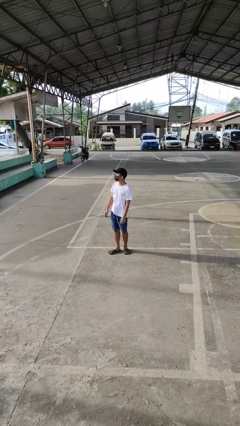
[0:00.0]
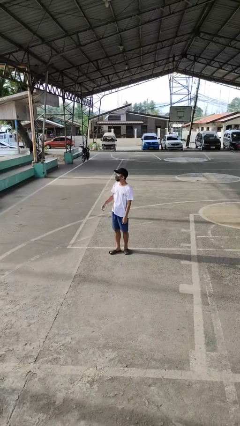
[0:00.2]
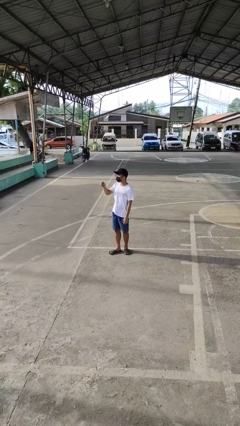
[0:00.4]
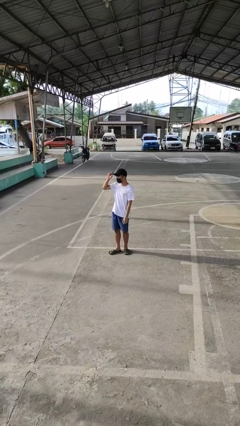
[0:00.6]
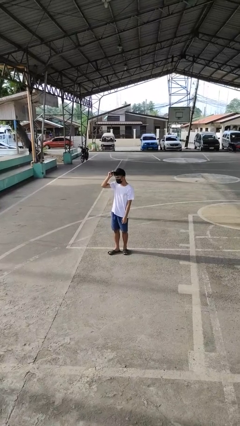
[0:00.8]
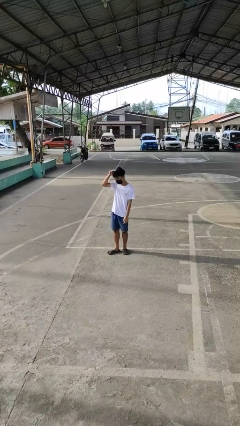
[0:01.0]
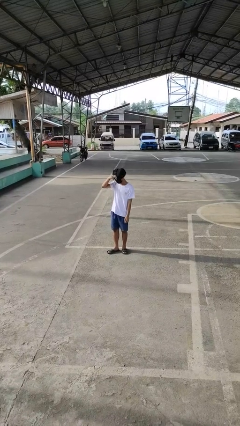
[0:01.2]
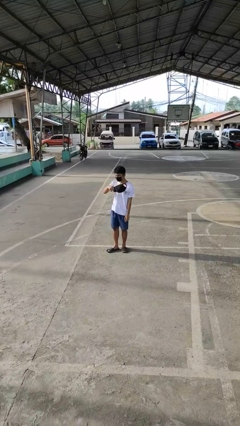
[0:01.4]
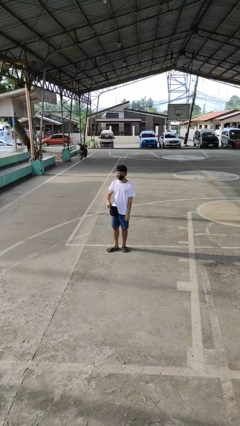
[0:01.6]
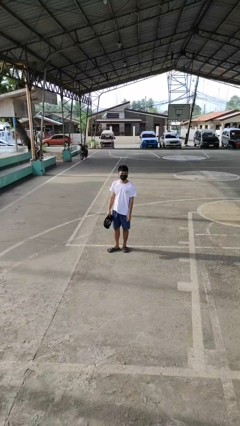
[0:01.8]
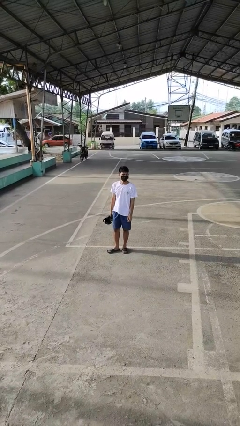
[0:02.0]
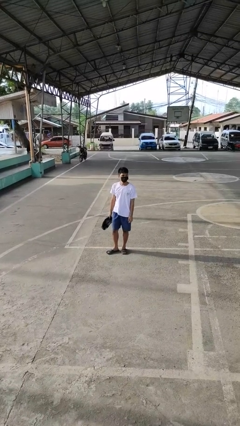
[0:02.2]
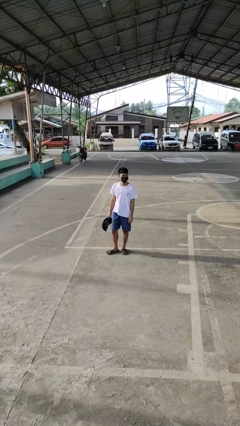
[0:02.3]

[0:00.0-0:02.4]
person takes off hat

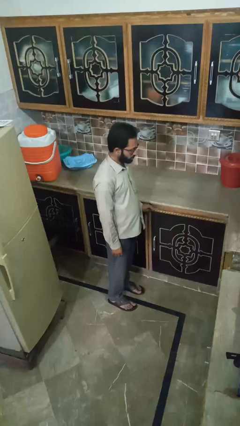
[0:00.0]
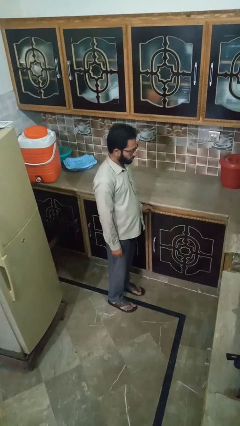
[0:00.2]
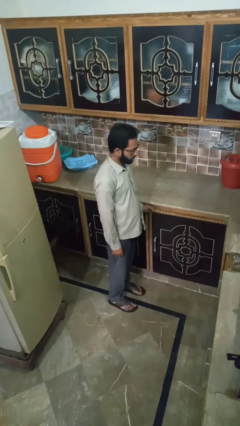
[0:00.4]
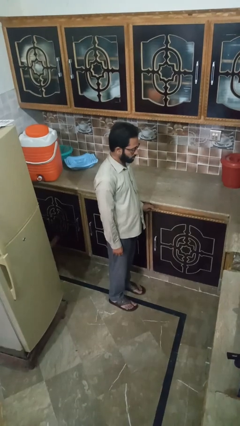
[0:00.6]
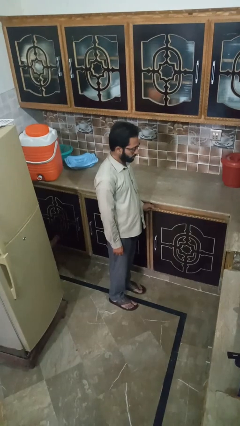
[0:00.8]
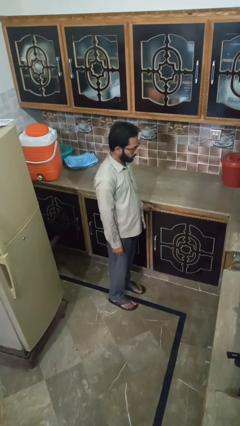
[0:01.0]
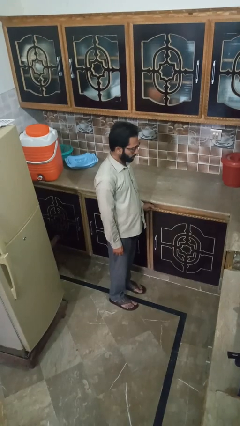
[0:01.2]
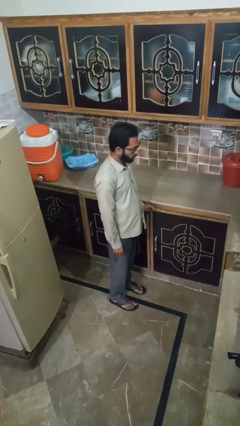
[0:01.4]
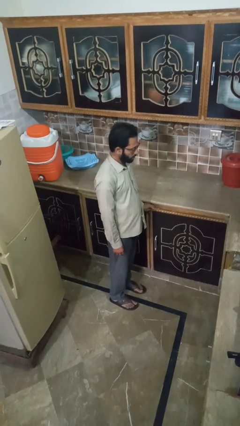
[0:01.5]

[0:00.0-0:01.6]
person opens cabinet

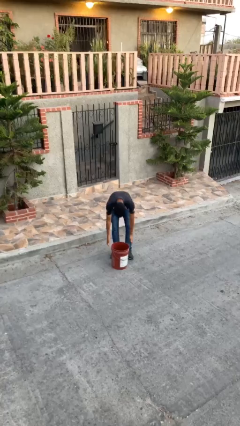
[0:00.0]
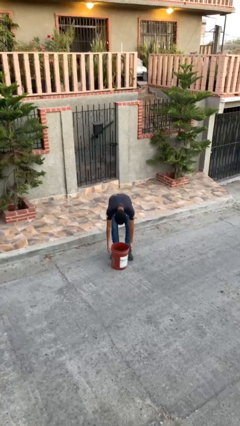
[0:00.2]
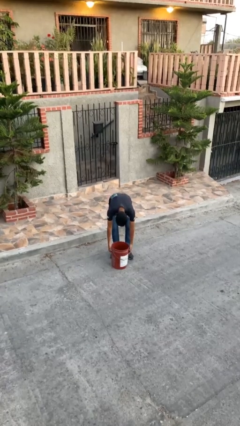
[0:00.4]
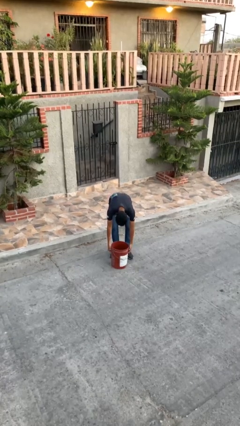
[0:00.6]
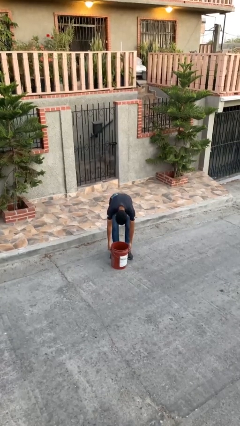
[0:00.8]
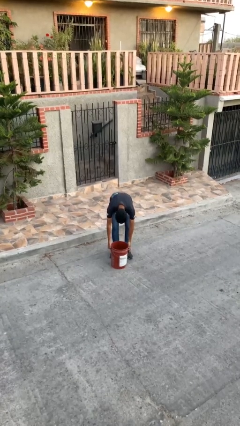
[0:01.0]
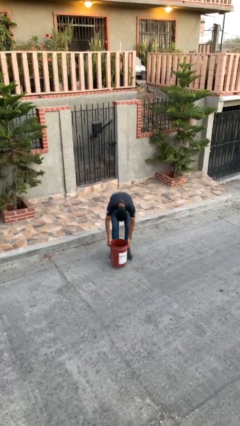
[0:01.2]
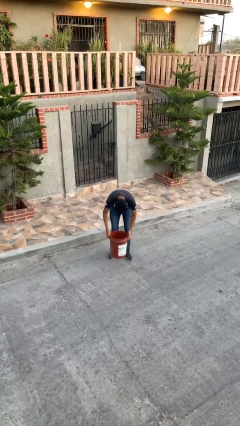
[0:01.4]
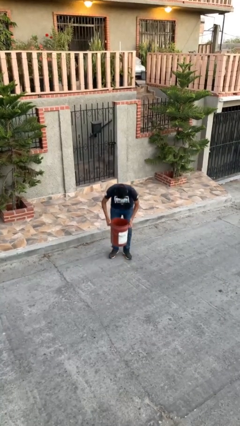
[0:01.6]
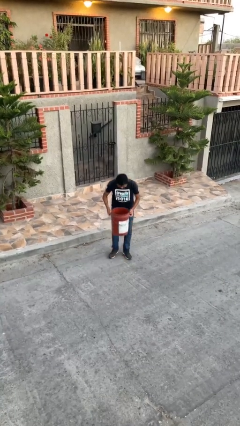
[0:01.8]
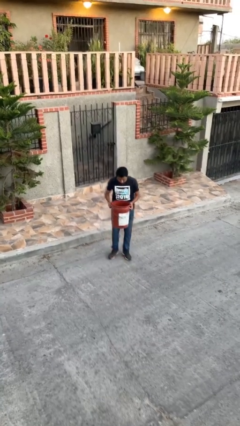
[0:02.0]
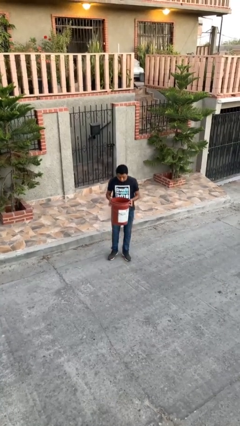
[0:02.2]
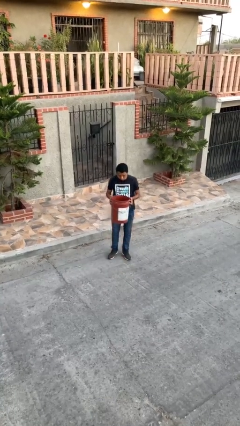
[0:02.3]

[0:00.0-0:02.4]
person picks up object from floor

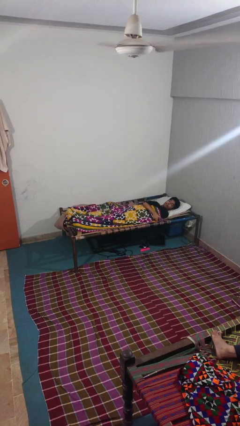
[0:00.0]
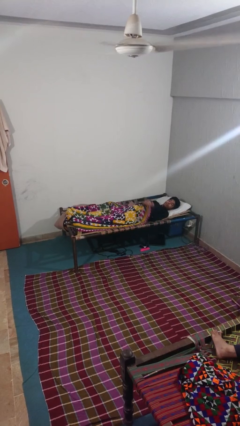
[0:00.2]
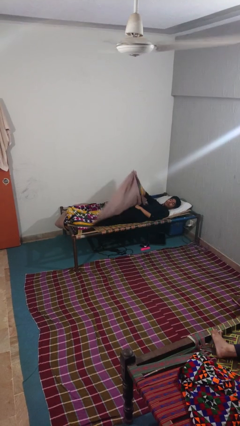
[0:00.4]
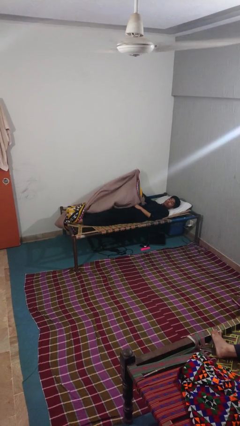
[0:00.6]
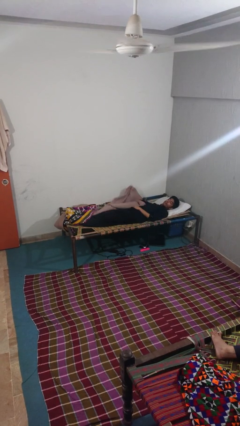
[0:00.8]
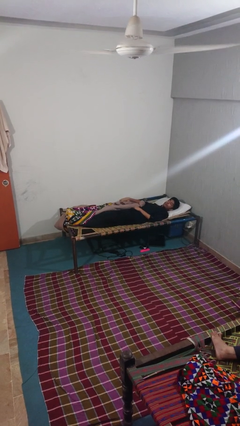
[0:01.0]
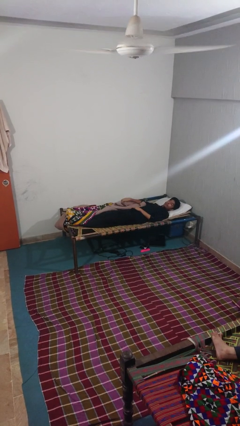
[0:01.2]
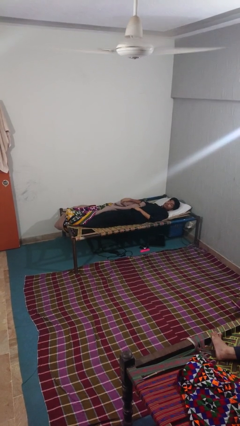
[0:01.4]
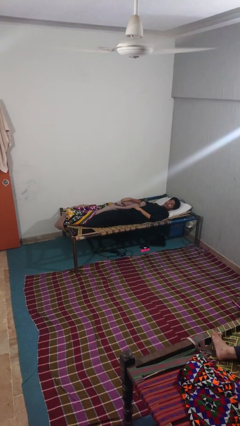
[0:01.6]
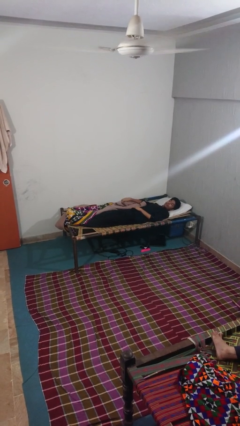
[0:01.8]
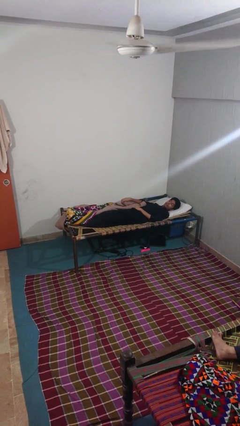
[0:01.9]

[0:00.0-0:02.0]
person uncovers with bedsheets

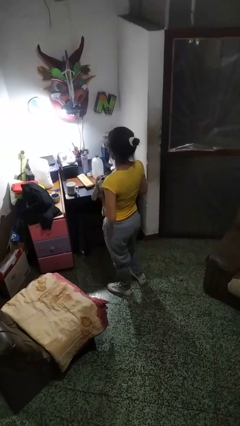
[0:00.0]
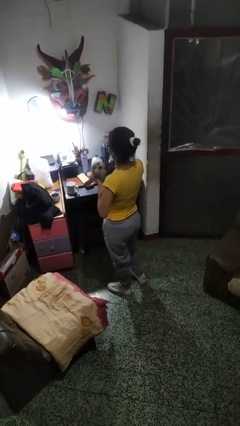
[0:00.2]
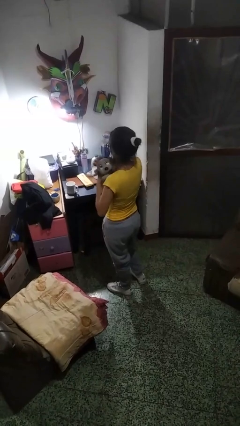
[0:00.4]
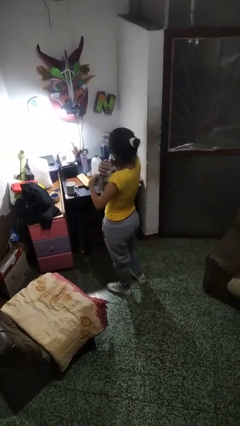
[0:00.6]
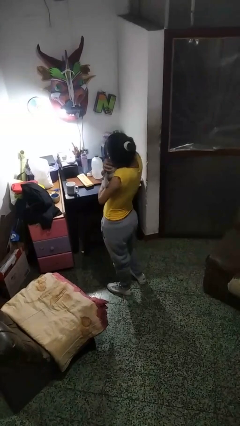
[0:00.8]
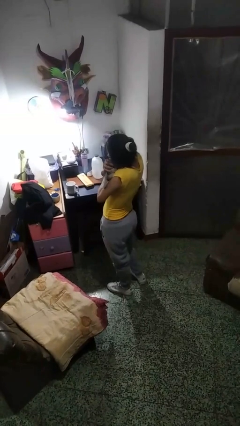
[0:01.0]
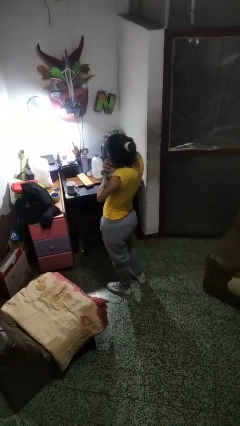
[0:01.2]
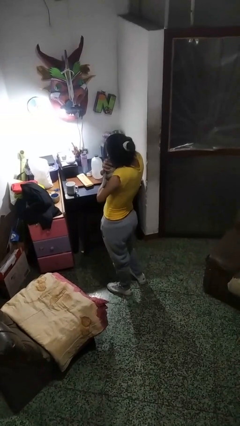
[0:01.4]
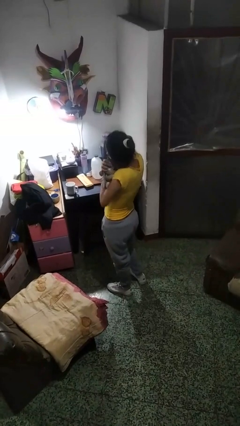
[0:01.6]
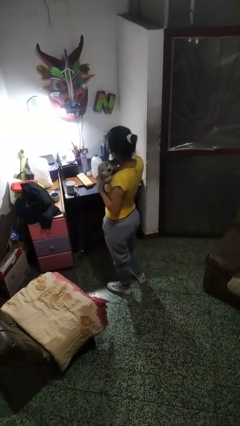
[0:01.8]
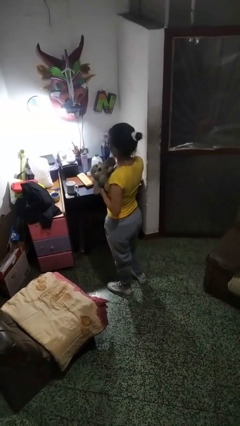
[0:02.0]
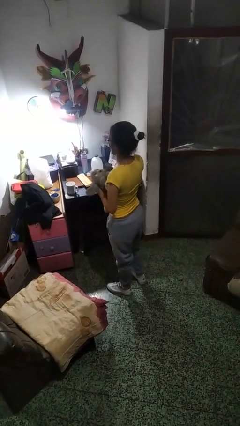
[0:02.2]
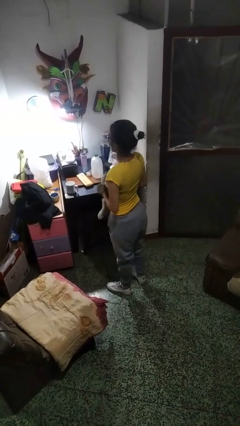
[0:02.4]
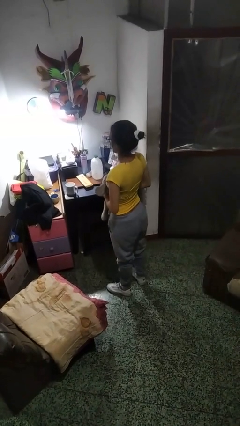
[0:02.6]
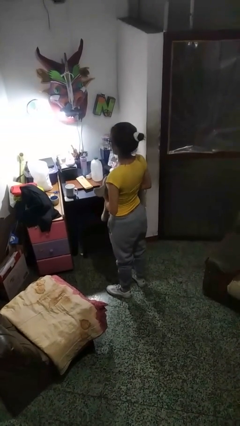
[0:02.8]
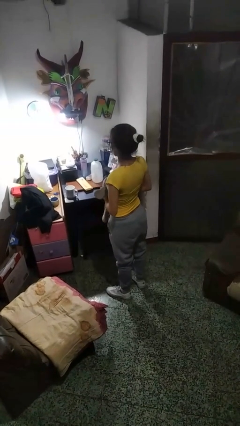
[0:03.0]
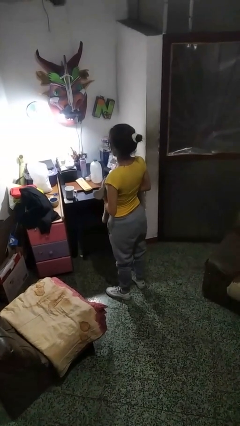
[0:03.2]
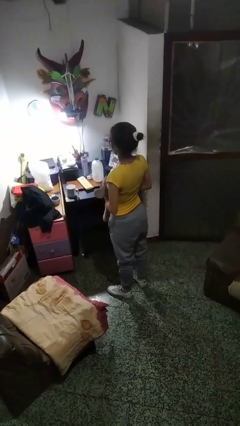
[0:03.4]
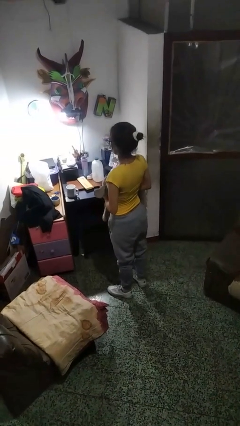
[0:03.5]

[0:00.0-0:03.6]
person hugs stuffed animal

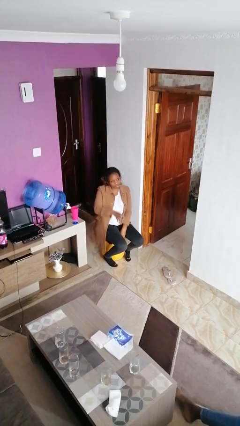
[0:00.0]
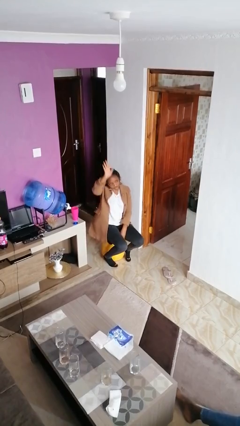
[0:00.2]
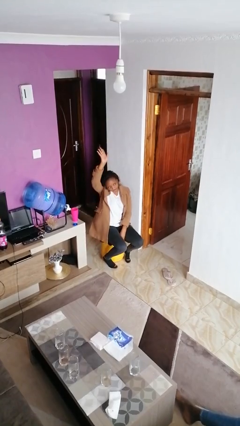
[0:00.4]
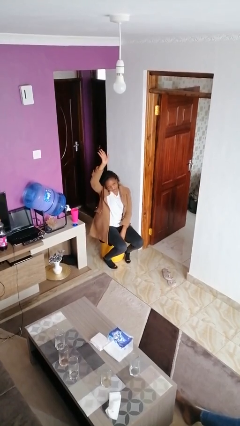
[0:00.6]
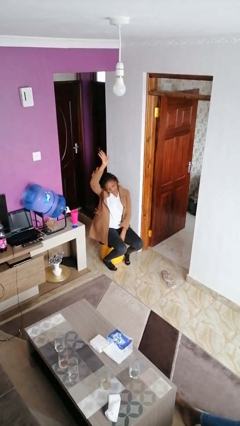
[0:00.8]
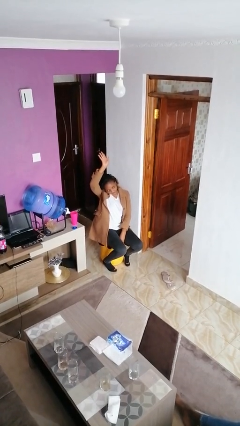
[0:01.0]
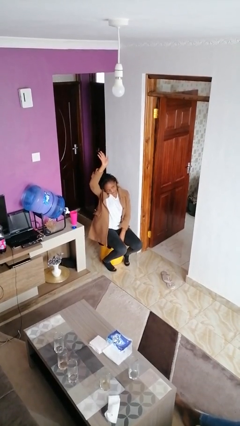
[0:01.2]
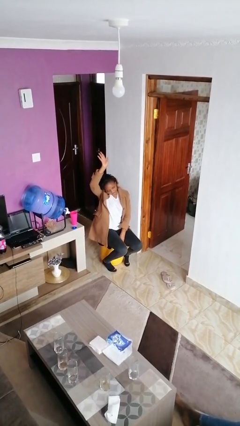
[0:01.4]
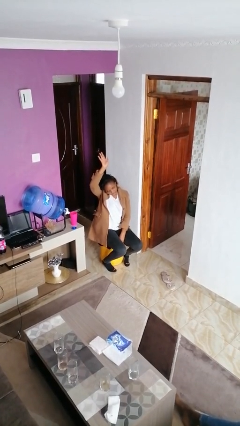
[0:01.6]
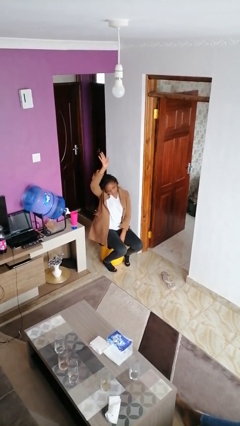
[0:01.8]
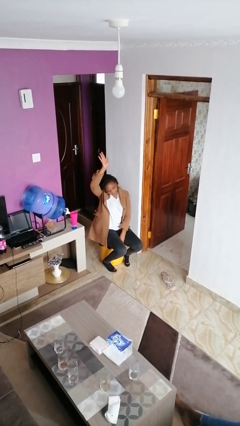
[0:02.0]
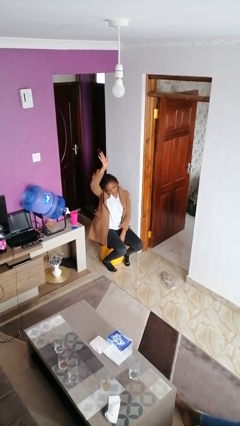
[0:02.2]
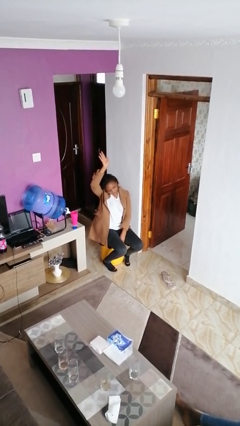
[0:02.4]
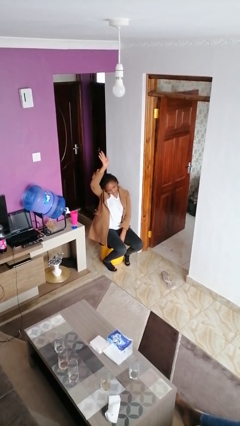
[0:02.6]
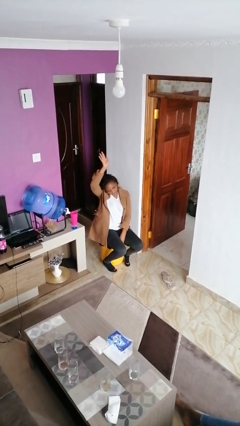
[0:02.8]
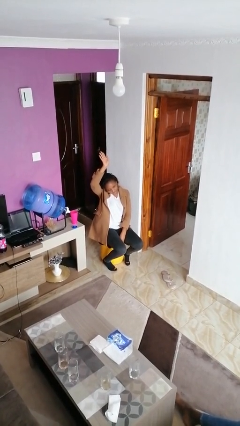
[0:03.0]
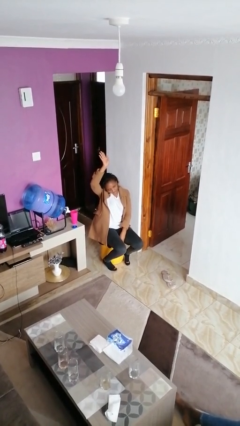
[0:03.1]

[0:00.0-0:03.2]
person gestures raise hand

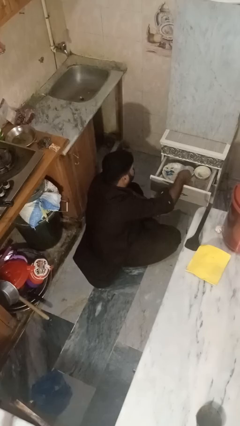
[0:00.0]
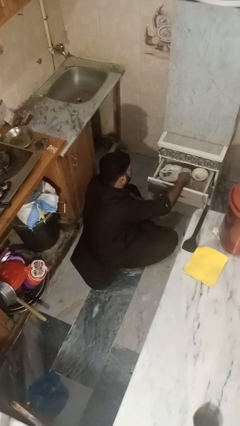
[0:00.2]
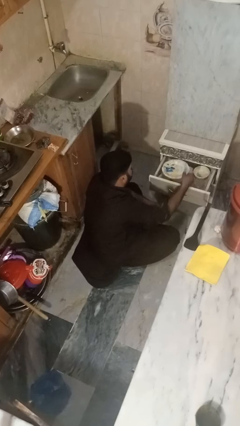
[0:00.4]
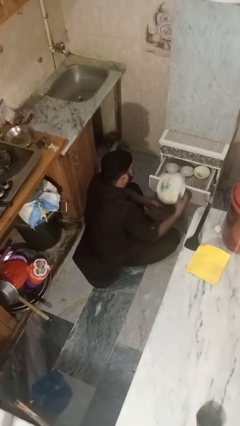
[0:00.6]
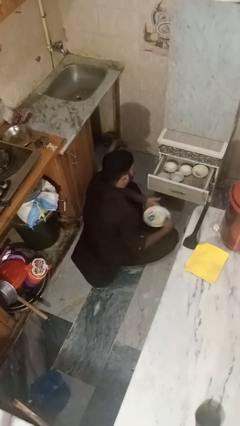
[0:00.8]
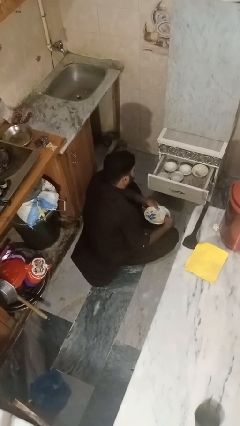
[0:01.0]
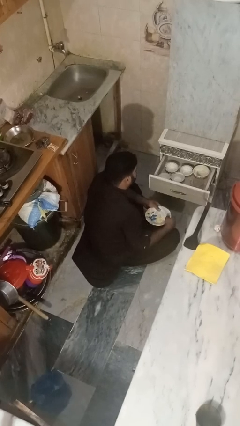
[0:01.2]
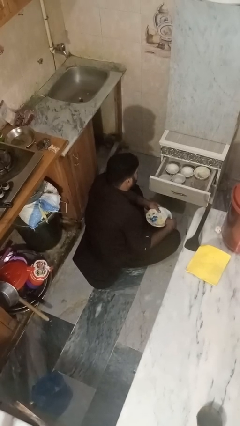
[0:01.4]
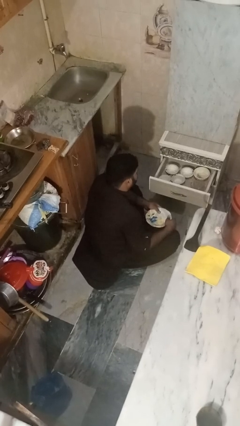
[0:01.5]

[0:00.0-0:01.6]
person takes object from kitchen drawer
